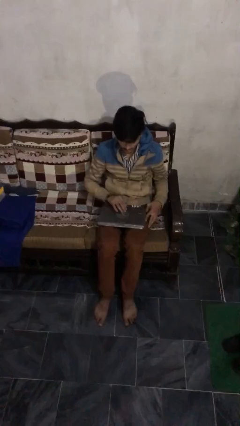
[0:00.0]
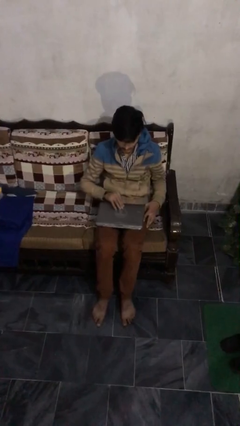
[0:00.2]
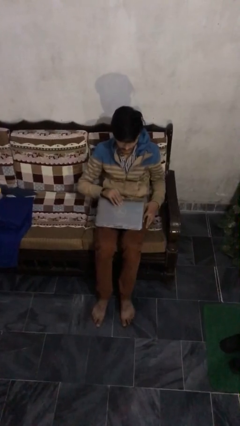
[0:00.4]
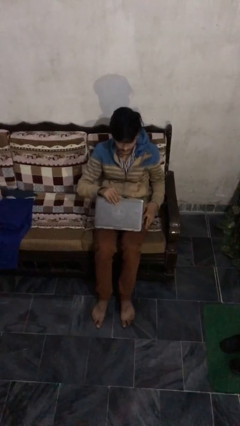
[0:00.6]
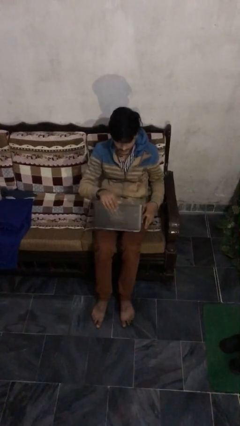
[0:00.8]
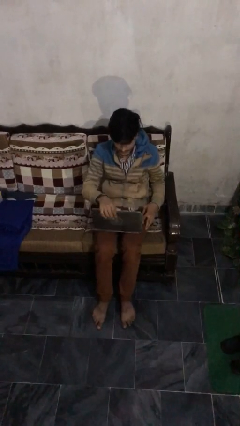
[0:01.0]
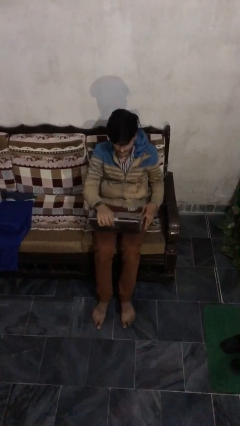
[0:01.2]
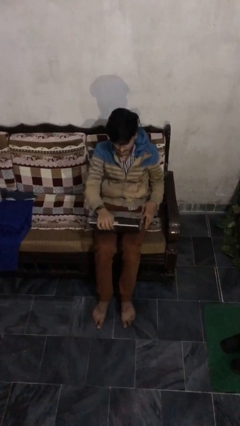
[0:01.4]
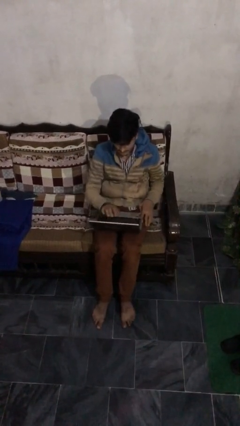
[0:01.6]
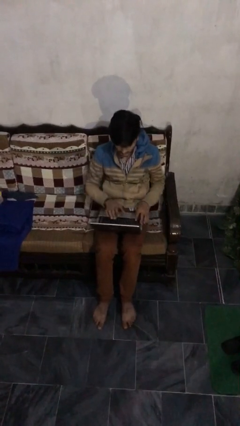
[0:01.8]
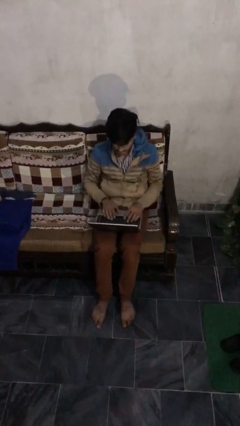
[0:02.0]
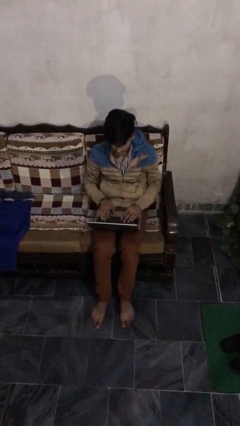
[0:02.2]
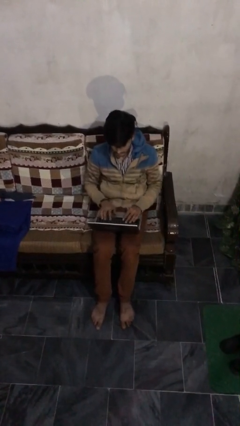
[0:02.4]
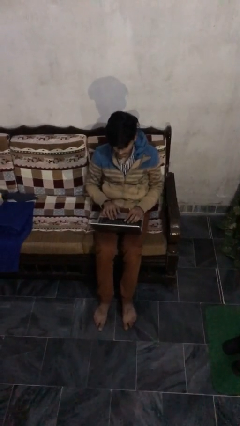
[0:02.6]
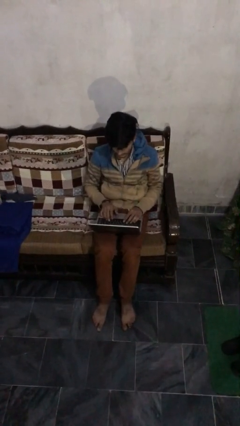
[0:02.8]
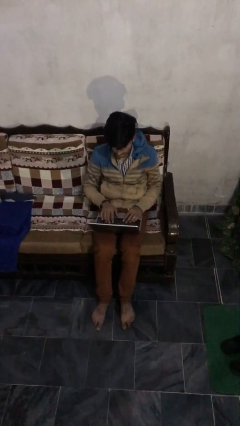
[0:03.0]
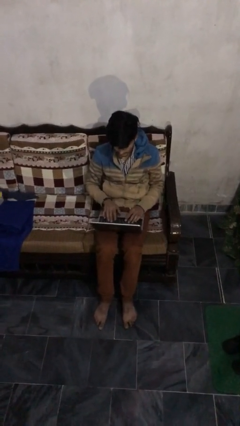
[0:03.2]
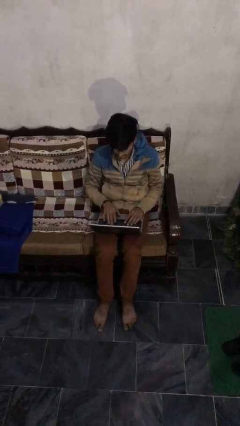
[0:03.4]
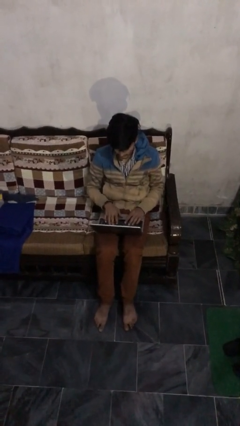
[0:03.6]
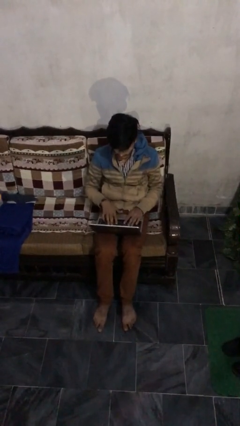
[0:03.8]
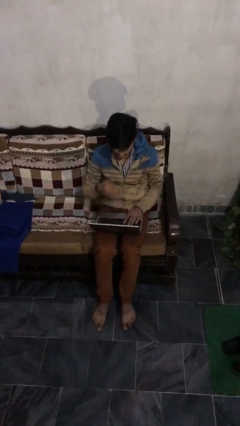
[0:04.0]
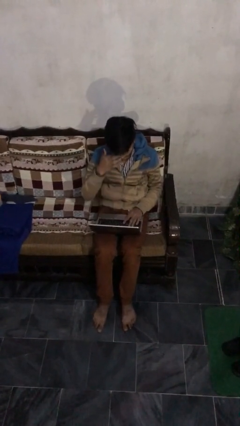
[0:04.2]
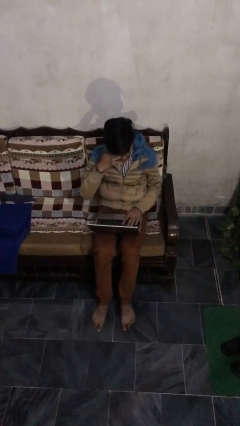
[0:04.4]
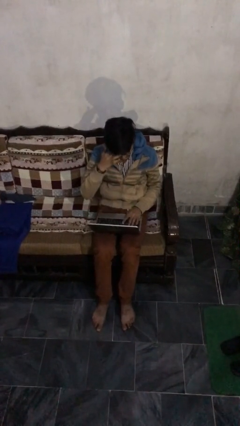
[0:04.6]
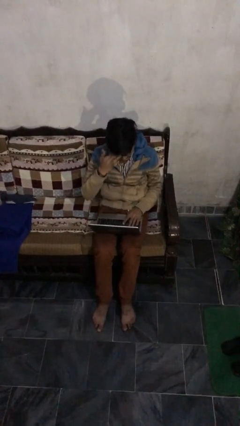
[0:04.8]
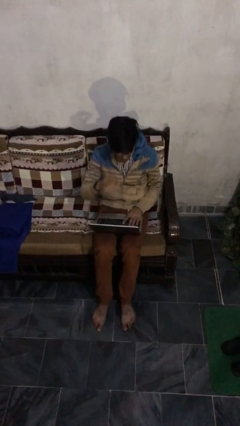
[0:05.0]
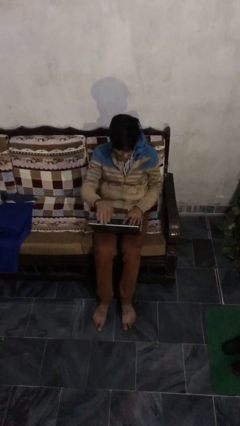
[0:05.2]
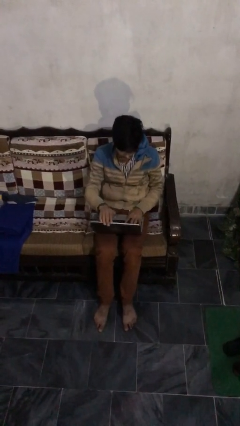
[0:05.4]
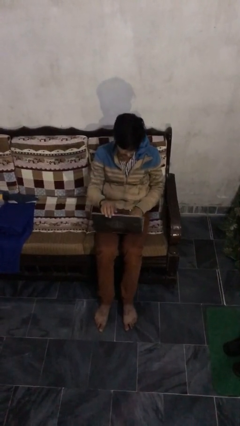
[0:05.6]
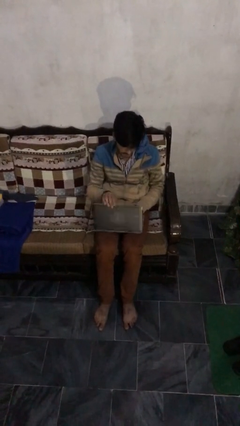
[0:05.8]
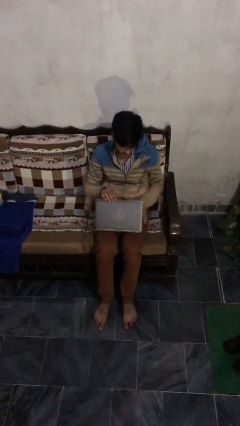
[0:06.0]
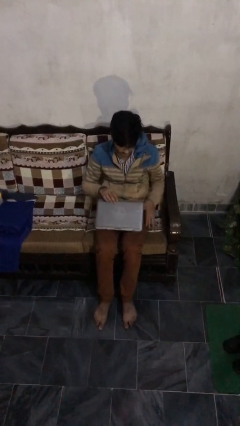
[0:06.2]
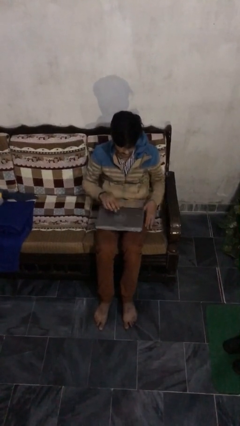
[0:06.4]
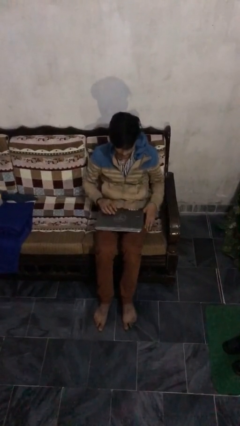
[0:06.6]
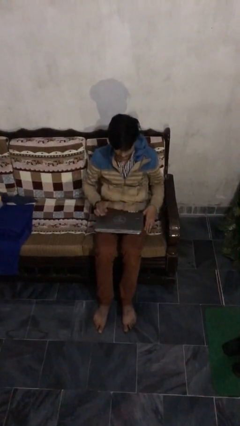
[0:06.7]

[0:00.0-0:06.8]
person interacts with laptop

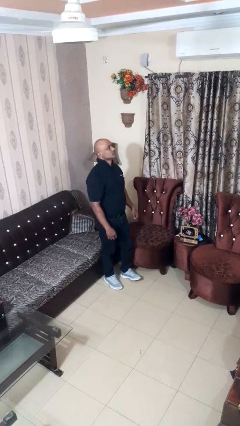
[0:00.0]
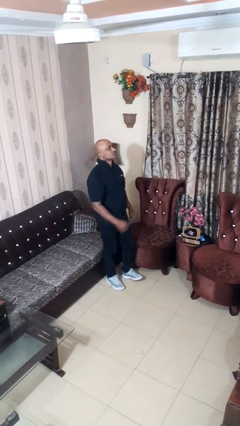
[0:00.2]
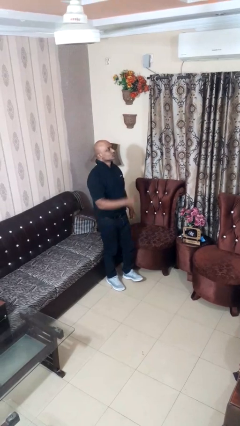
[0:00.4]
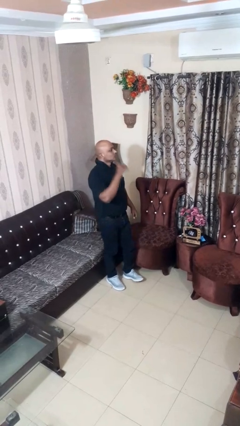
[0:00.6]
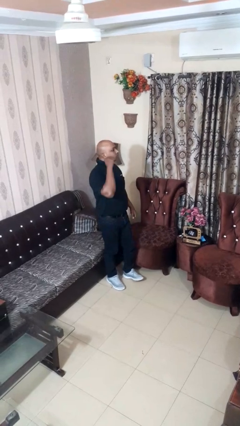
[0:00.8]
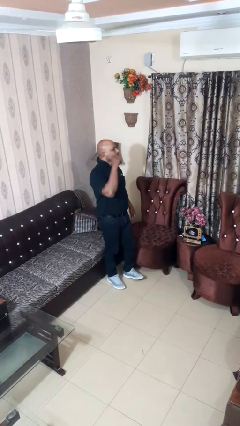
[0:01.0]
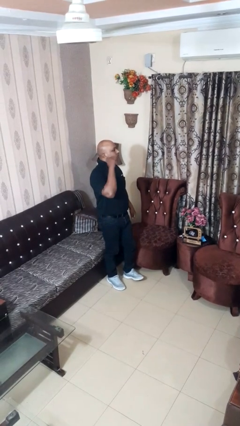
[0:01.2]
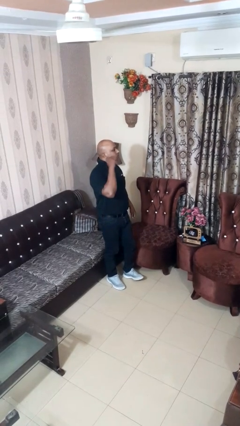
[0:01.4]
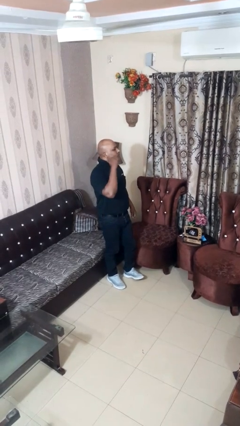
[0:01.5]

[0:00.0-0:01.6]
person gestures behind me

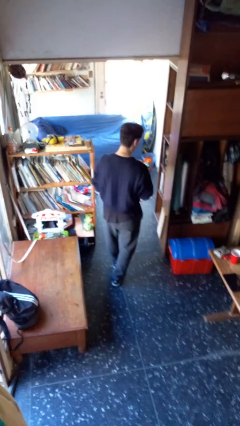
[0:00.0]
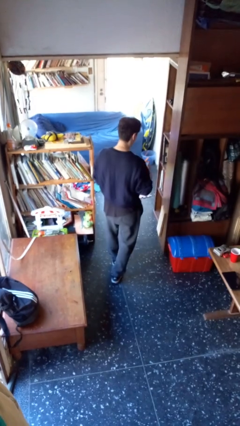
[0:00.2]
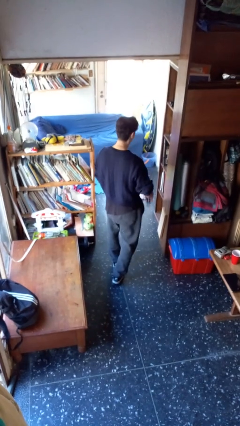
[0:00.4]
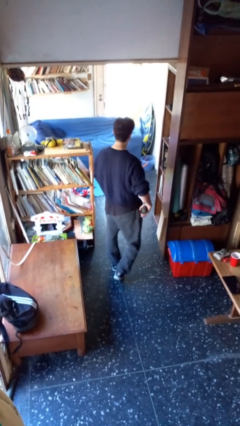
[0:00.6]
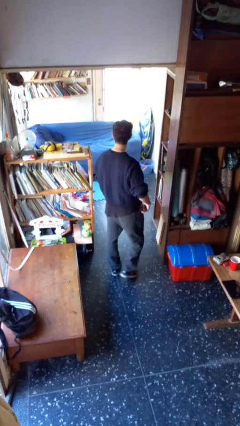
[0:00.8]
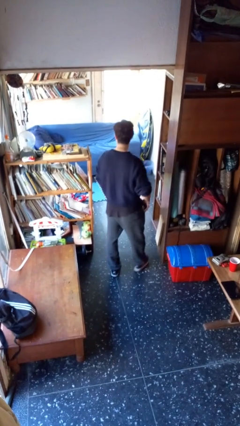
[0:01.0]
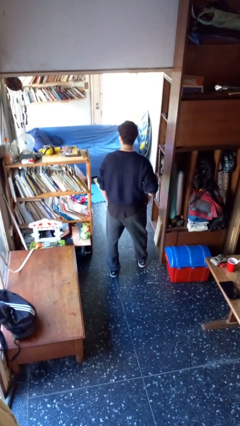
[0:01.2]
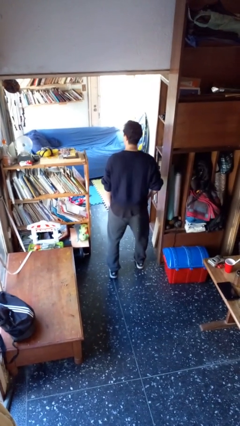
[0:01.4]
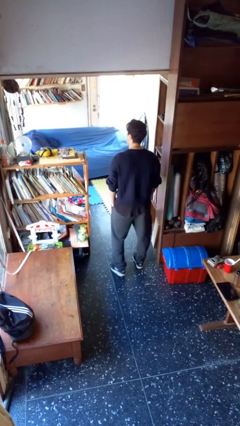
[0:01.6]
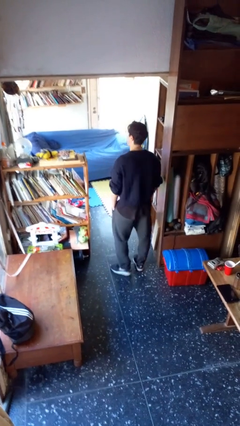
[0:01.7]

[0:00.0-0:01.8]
person puts phone into pocket

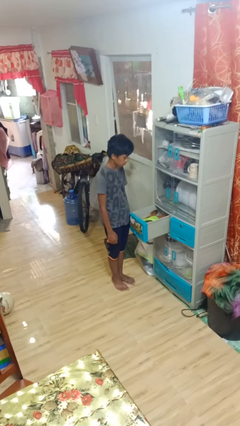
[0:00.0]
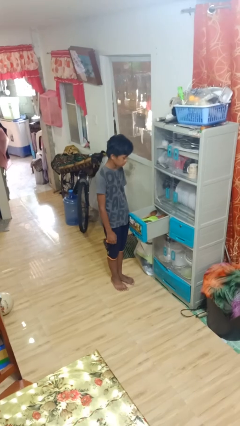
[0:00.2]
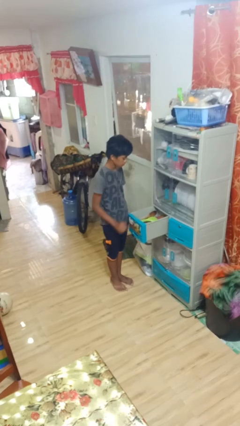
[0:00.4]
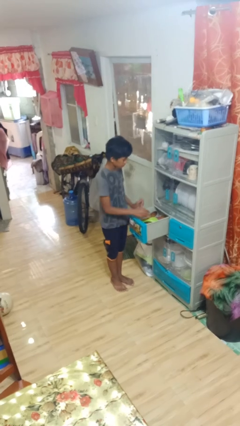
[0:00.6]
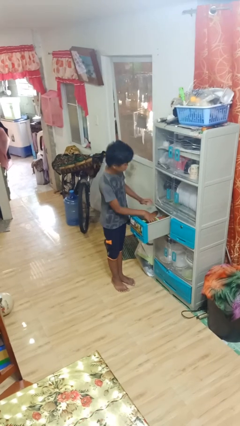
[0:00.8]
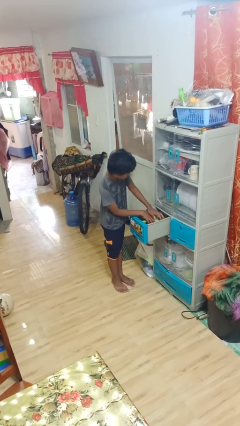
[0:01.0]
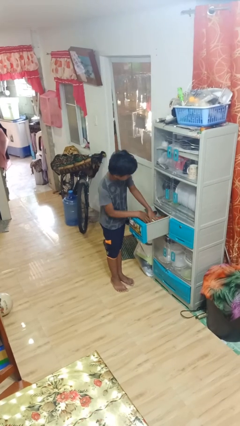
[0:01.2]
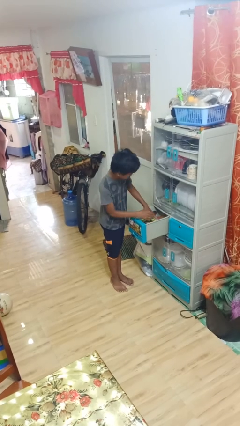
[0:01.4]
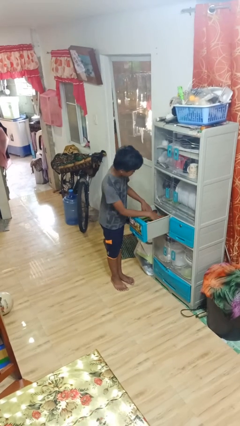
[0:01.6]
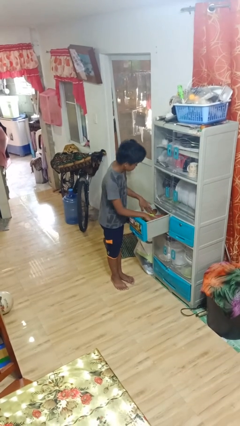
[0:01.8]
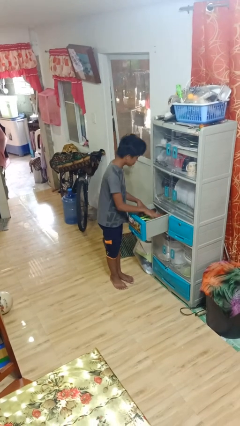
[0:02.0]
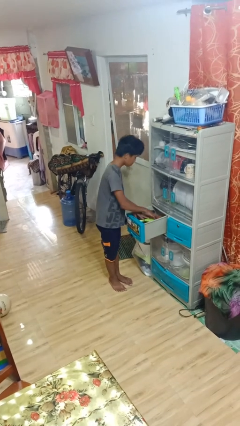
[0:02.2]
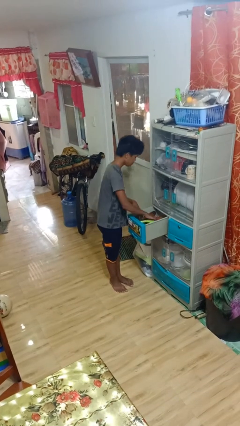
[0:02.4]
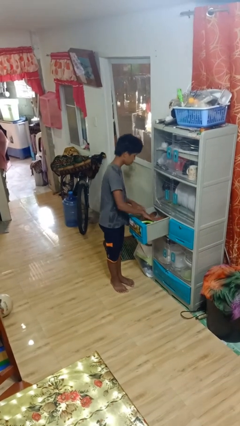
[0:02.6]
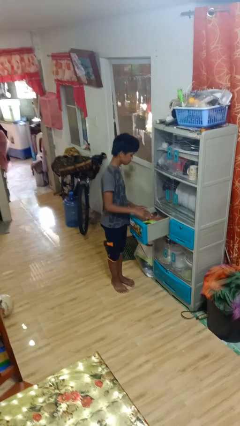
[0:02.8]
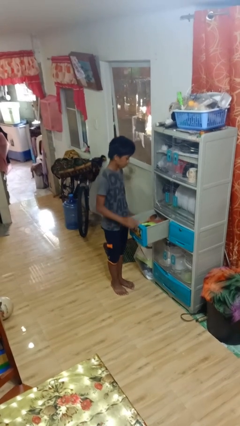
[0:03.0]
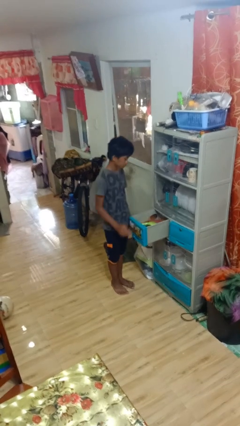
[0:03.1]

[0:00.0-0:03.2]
person searches in kitchen drawer

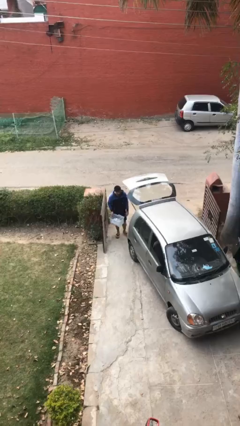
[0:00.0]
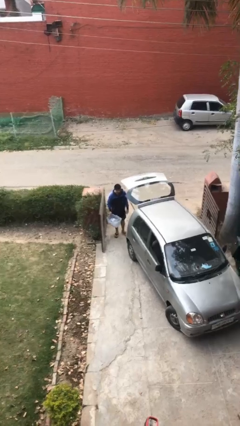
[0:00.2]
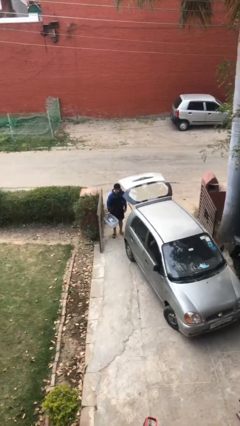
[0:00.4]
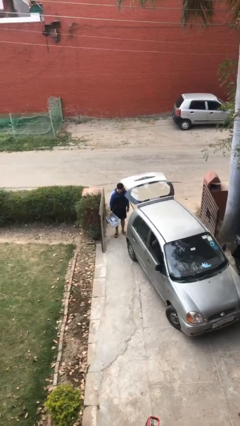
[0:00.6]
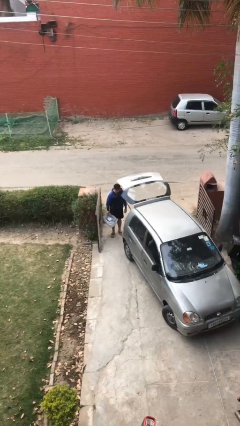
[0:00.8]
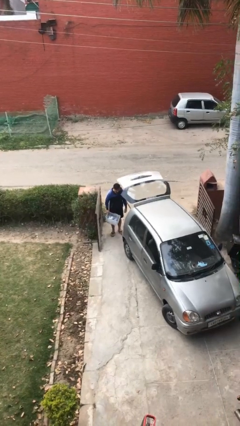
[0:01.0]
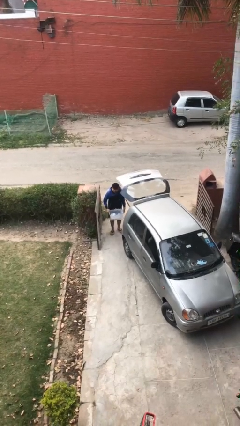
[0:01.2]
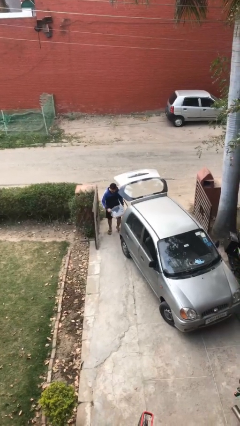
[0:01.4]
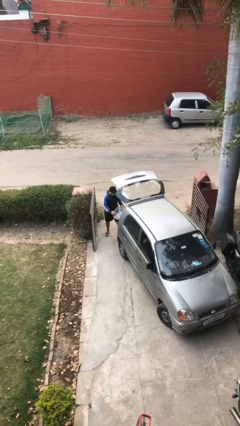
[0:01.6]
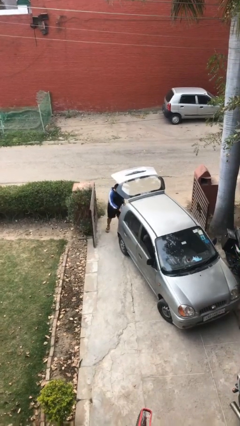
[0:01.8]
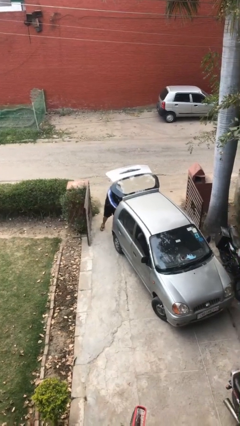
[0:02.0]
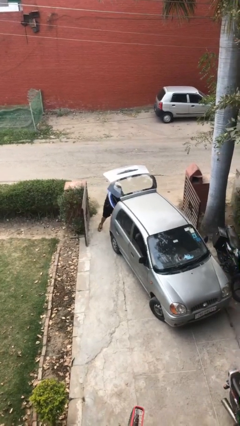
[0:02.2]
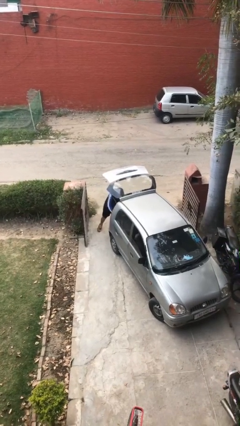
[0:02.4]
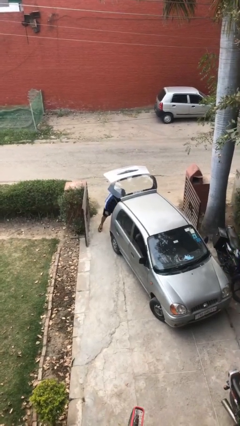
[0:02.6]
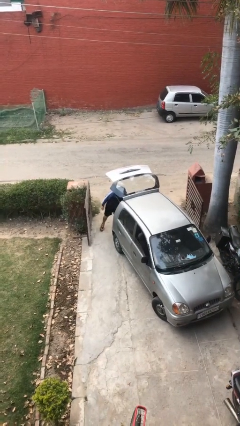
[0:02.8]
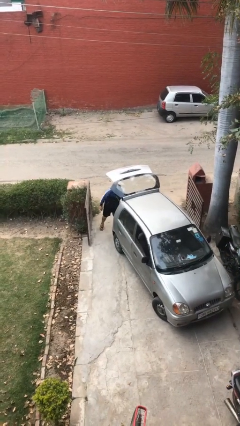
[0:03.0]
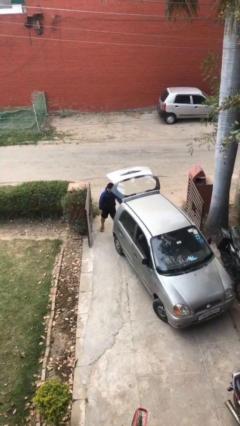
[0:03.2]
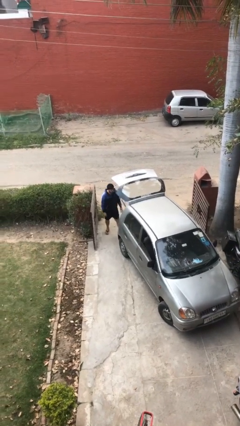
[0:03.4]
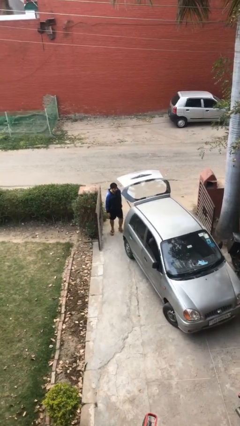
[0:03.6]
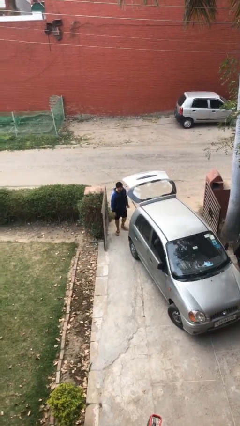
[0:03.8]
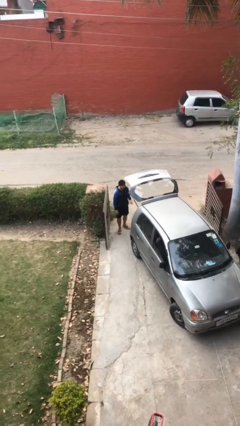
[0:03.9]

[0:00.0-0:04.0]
person loads car

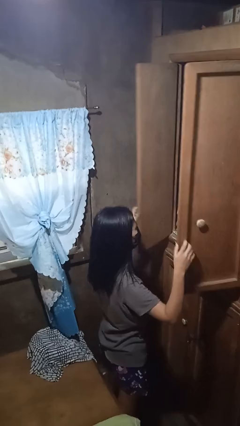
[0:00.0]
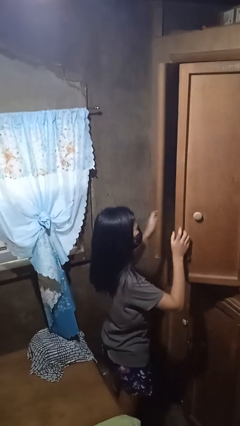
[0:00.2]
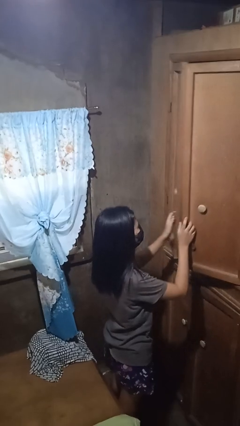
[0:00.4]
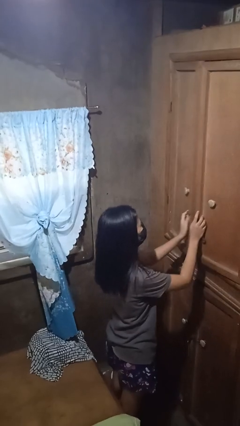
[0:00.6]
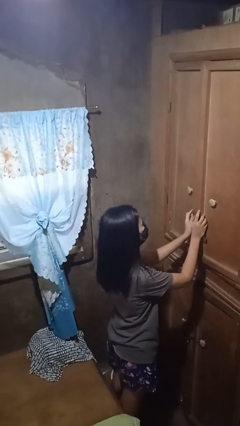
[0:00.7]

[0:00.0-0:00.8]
person closes closet door
